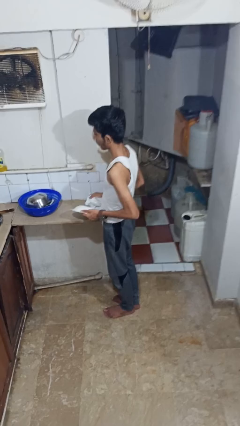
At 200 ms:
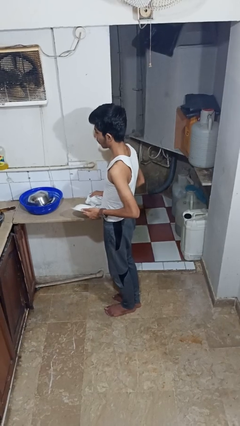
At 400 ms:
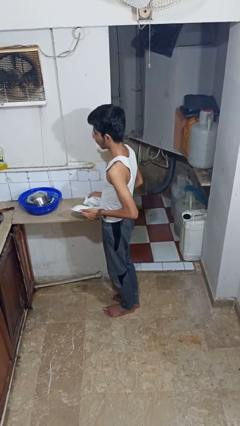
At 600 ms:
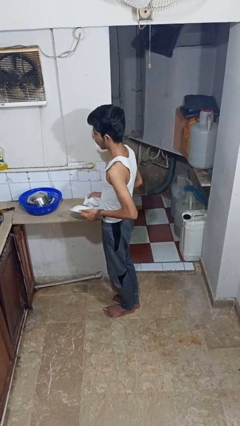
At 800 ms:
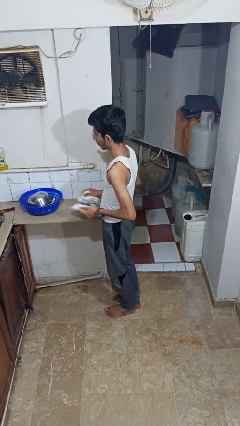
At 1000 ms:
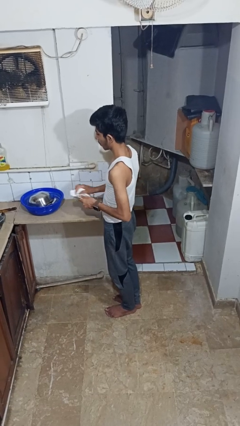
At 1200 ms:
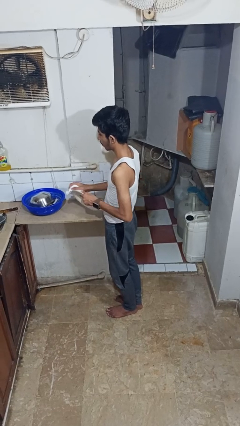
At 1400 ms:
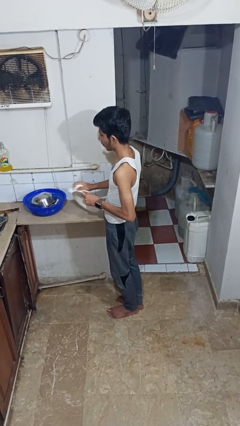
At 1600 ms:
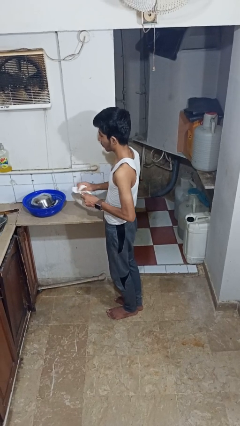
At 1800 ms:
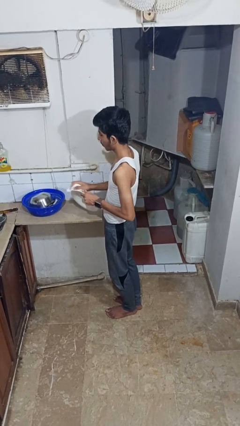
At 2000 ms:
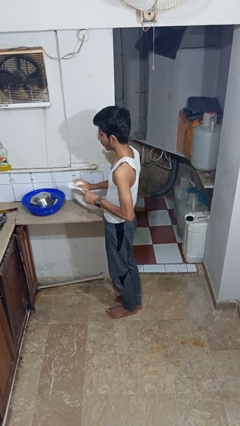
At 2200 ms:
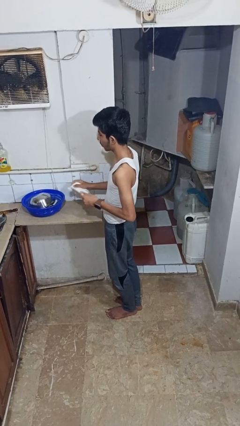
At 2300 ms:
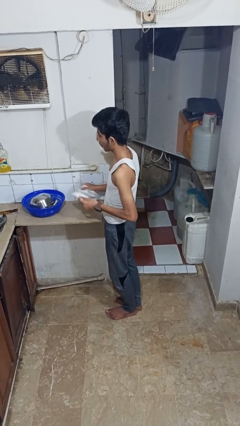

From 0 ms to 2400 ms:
person dries dish

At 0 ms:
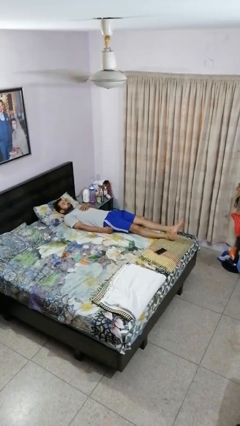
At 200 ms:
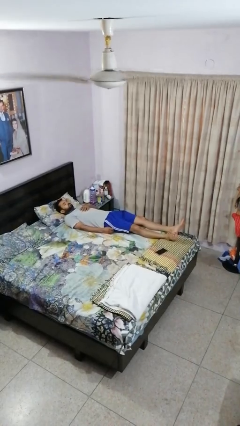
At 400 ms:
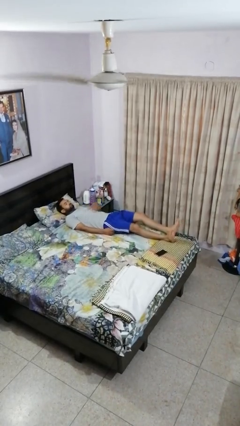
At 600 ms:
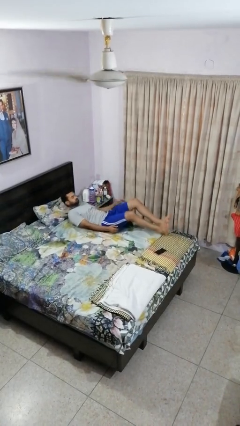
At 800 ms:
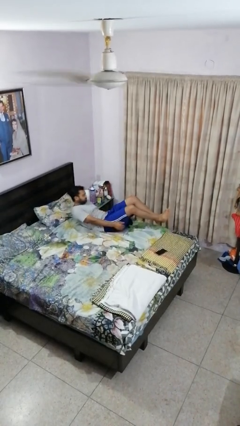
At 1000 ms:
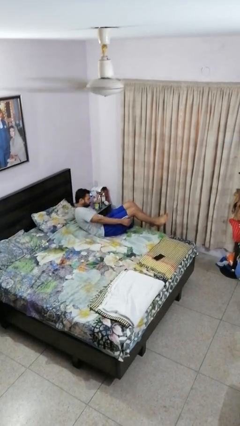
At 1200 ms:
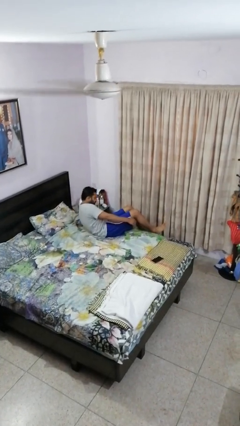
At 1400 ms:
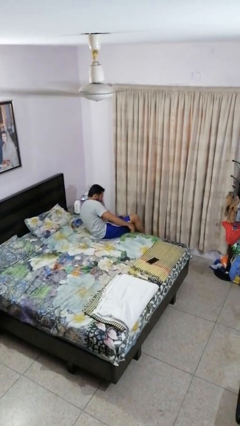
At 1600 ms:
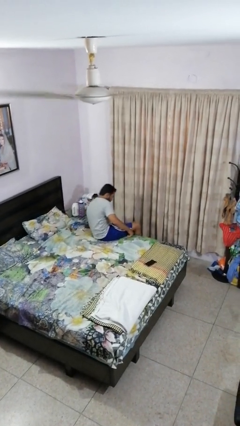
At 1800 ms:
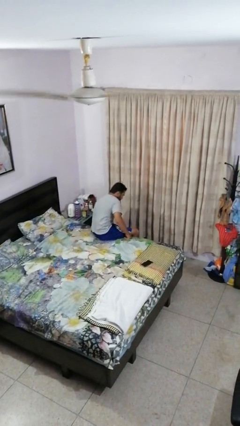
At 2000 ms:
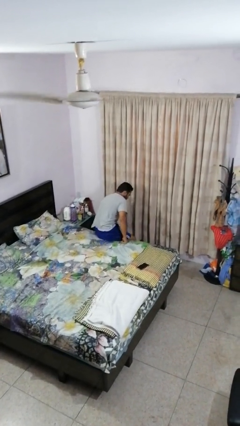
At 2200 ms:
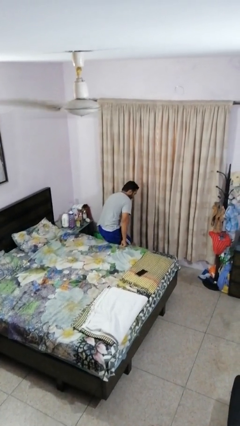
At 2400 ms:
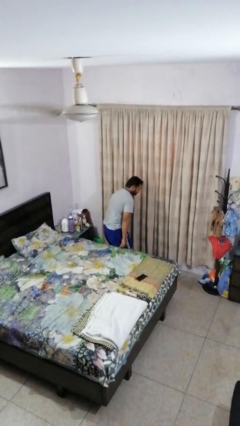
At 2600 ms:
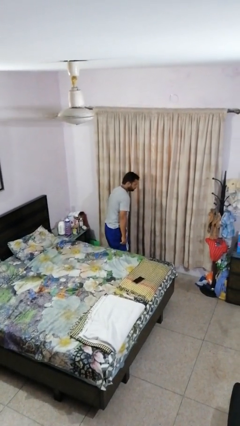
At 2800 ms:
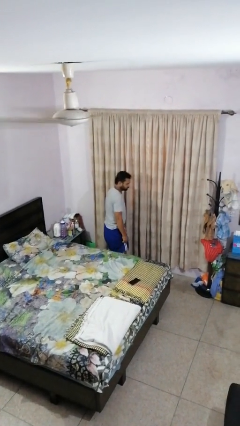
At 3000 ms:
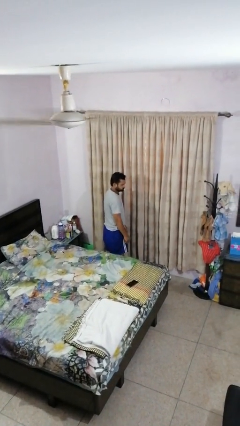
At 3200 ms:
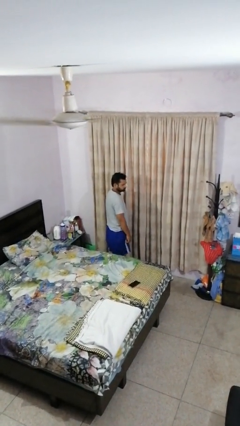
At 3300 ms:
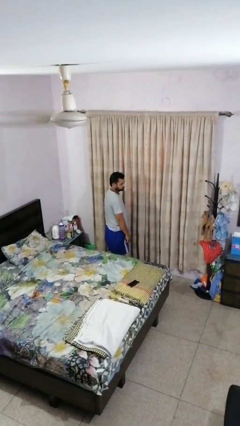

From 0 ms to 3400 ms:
person stands up

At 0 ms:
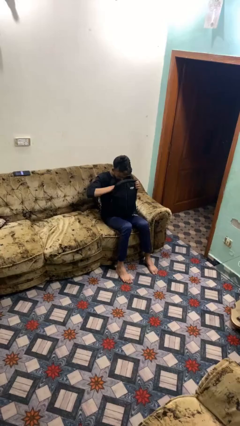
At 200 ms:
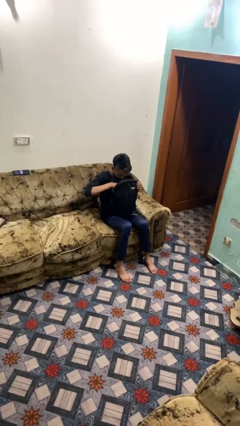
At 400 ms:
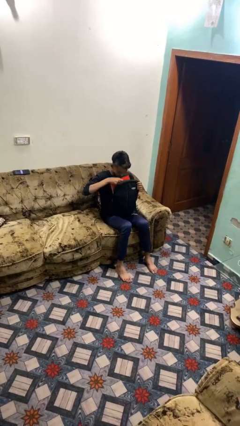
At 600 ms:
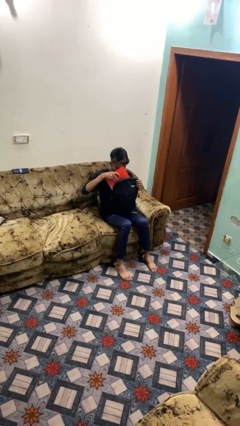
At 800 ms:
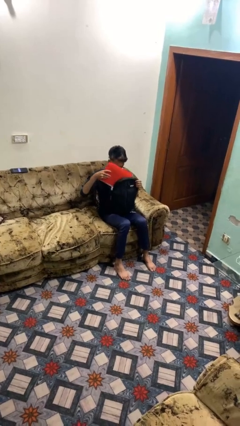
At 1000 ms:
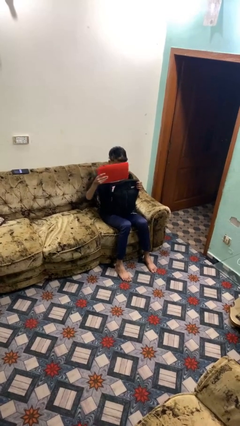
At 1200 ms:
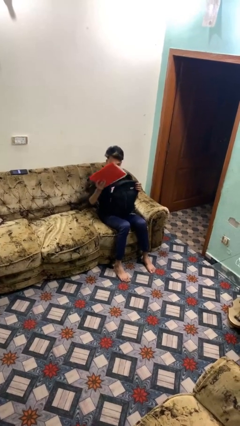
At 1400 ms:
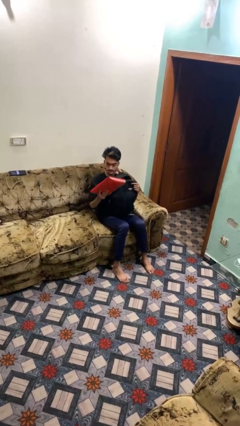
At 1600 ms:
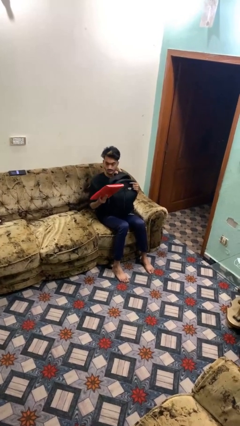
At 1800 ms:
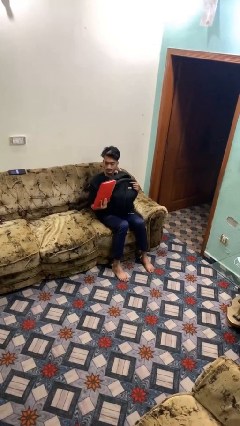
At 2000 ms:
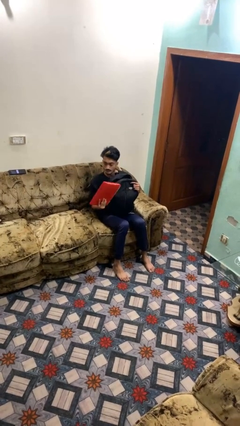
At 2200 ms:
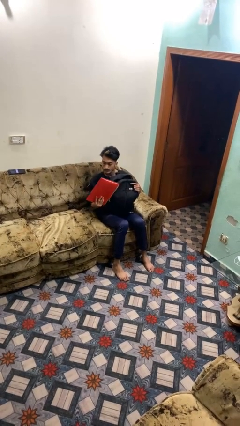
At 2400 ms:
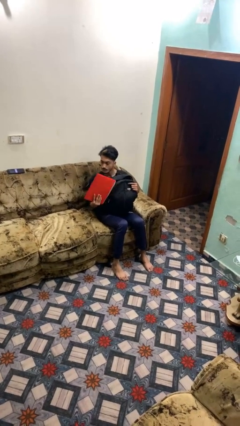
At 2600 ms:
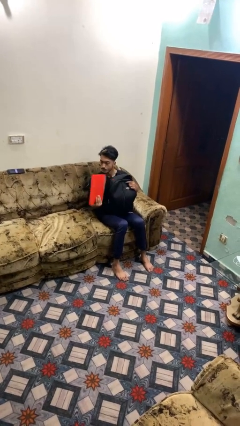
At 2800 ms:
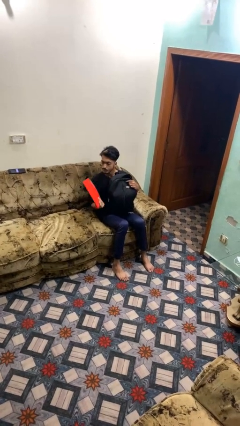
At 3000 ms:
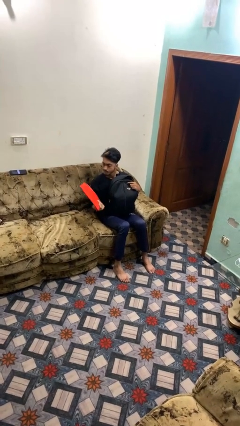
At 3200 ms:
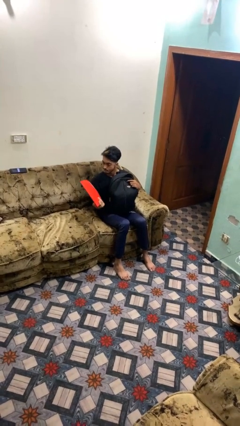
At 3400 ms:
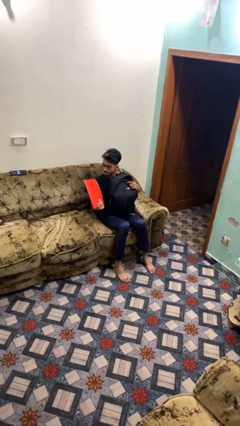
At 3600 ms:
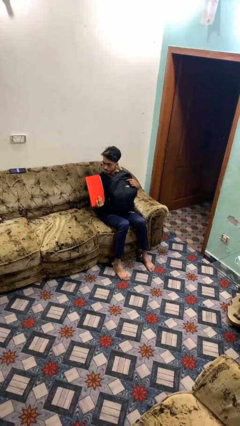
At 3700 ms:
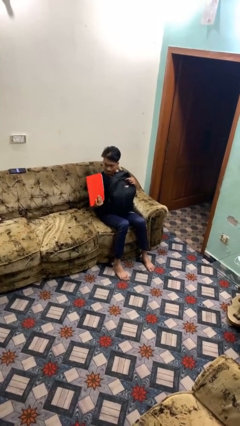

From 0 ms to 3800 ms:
person takes object from backpack

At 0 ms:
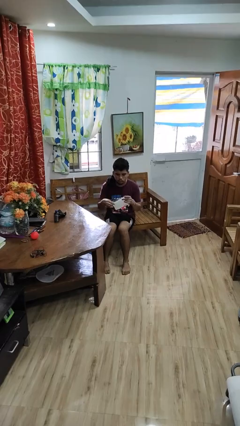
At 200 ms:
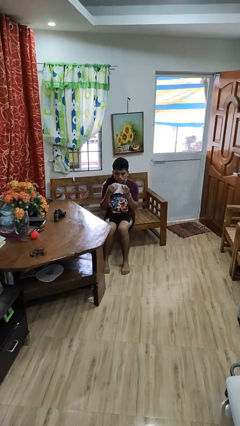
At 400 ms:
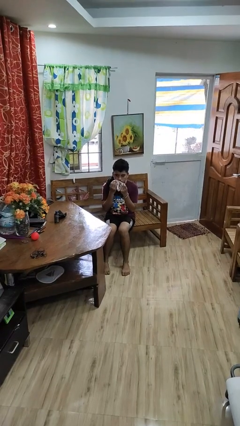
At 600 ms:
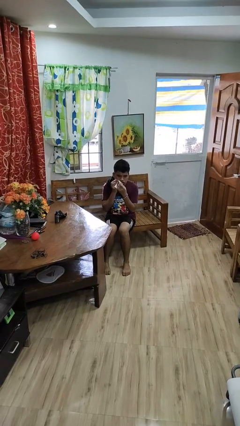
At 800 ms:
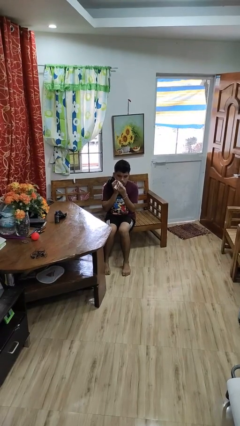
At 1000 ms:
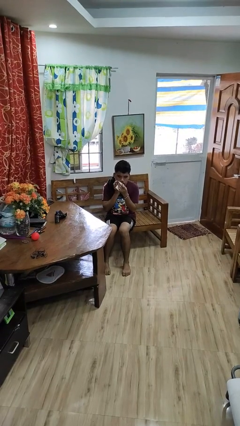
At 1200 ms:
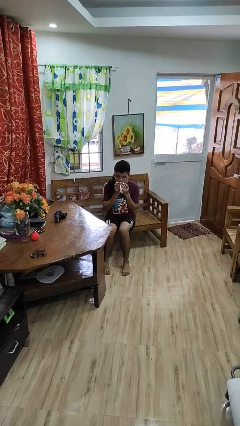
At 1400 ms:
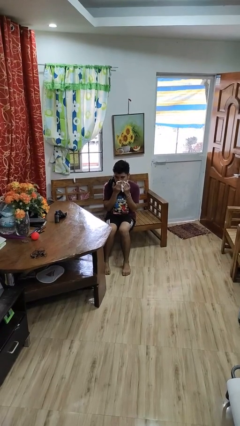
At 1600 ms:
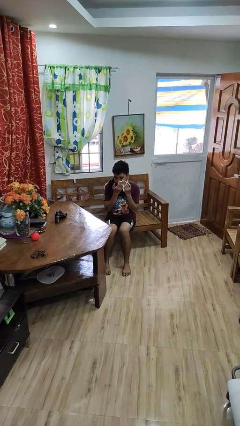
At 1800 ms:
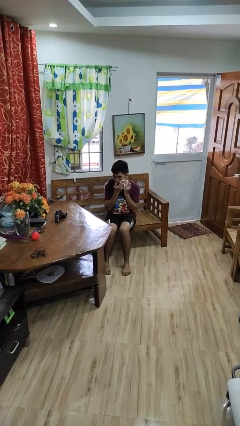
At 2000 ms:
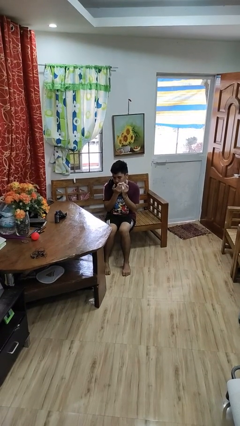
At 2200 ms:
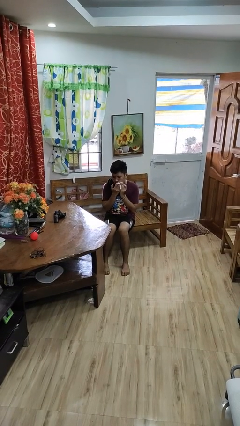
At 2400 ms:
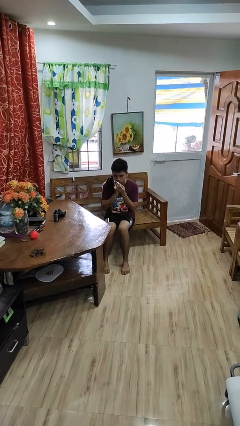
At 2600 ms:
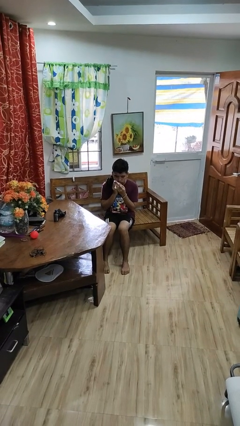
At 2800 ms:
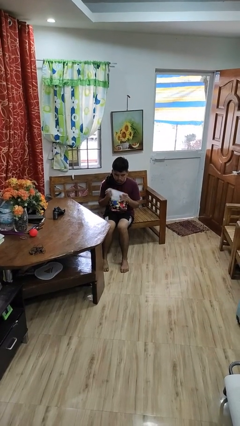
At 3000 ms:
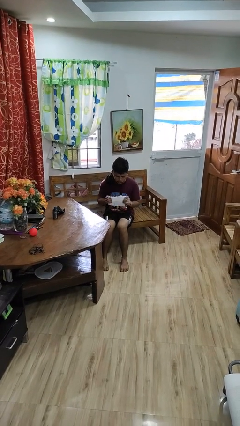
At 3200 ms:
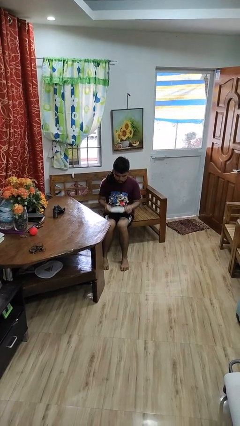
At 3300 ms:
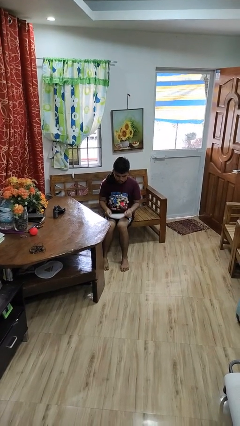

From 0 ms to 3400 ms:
person wipes mouth with napkin

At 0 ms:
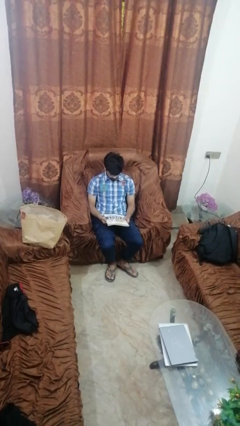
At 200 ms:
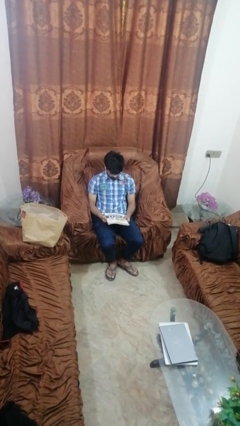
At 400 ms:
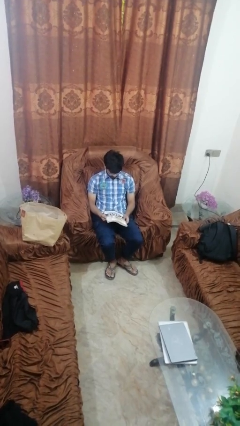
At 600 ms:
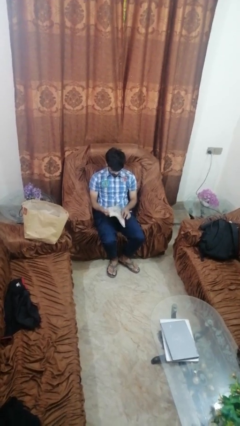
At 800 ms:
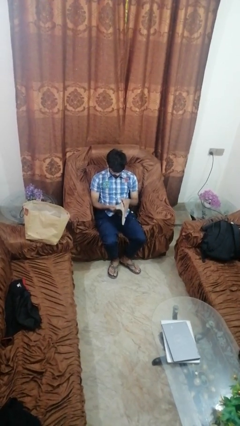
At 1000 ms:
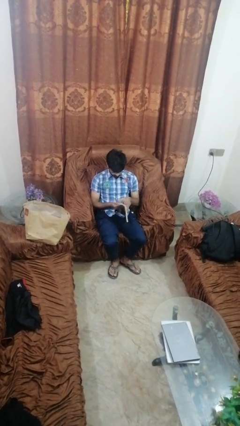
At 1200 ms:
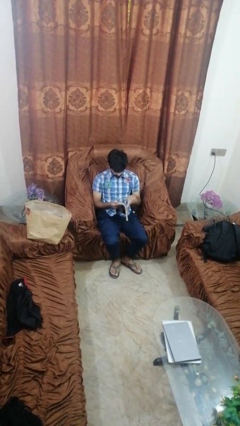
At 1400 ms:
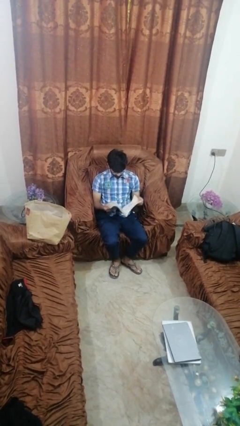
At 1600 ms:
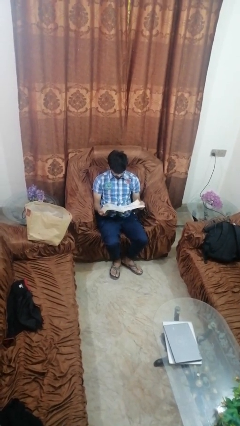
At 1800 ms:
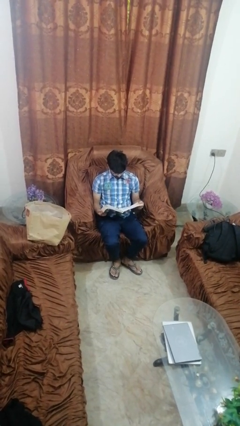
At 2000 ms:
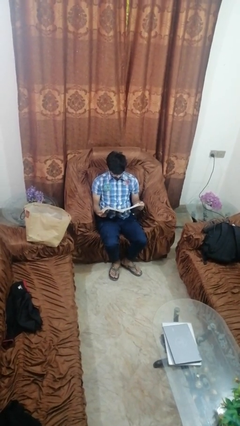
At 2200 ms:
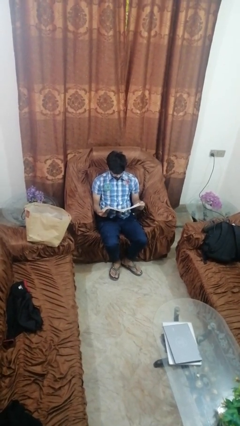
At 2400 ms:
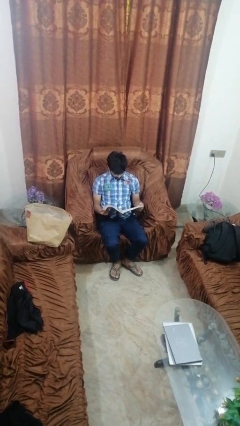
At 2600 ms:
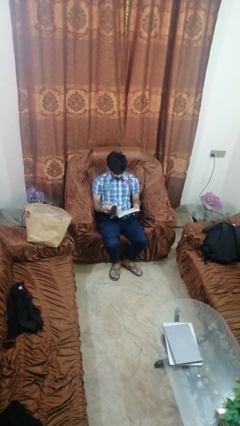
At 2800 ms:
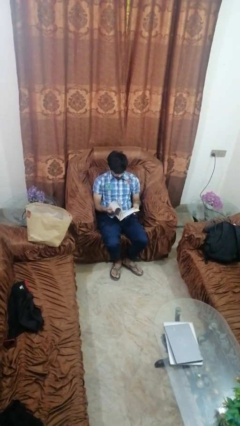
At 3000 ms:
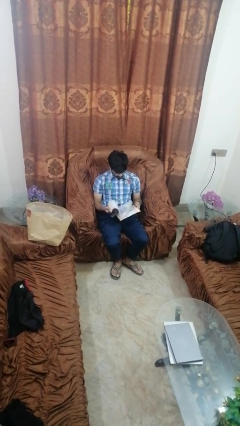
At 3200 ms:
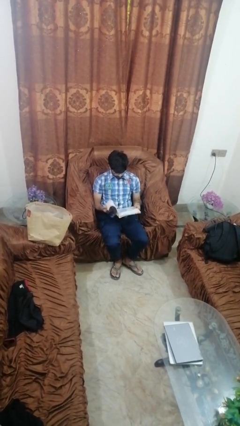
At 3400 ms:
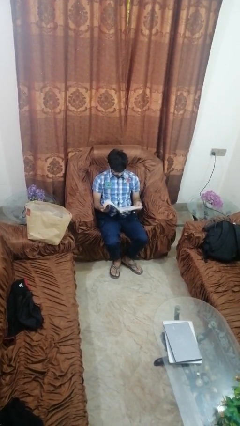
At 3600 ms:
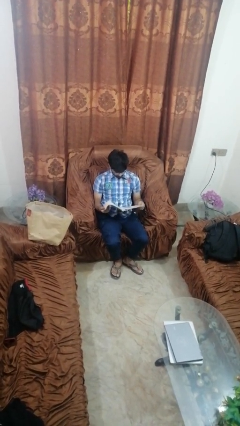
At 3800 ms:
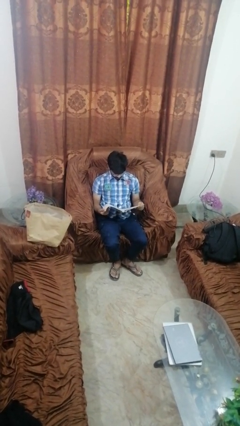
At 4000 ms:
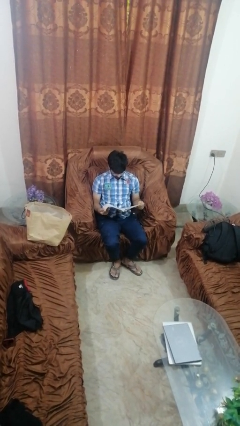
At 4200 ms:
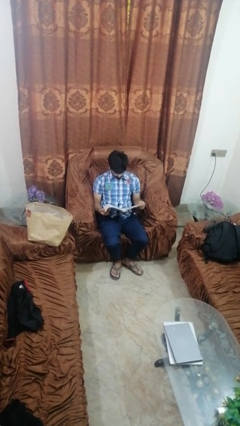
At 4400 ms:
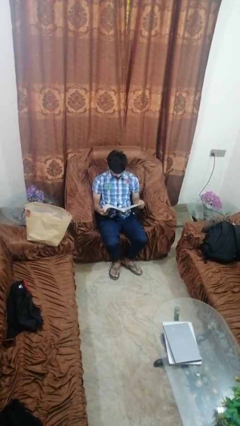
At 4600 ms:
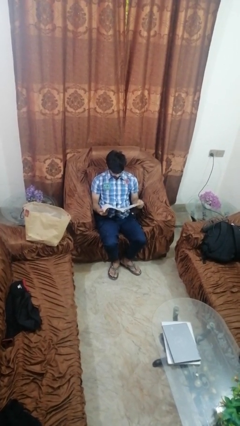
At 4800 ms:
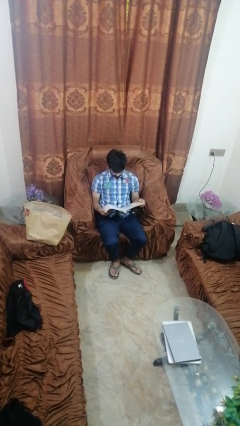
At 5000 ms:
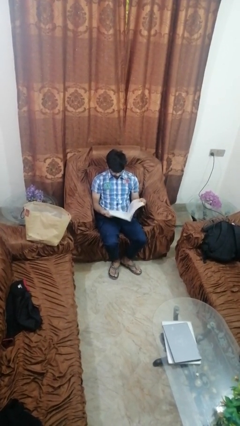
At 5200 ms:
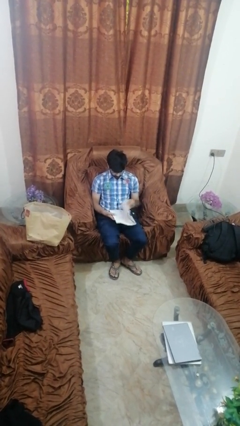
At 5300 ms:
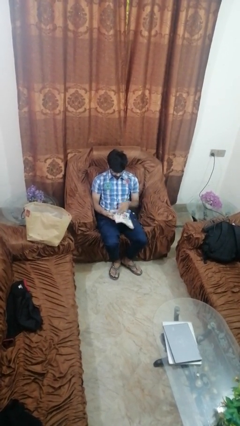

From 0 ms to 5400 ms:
person reads magazine
